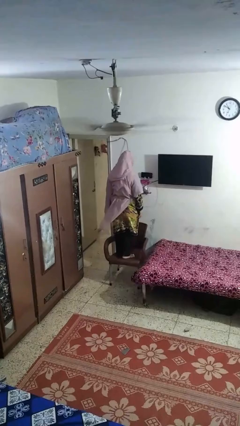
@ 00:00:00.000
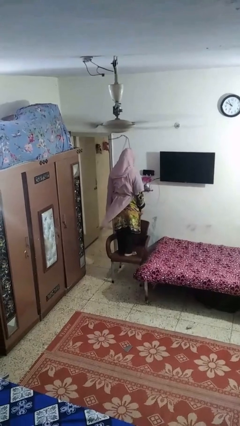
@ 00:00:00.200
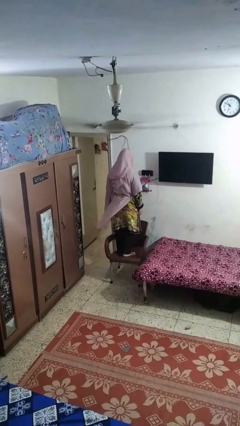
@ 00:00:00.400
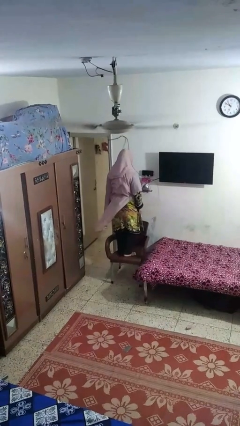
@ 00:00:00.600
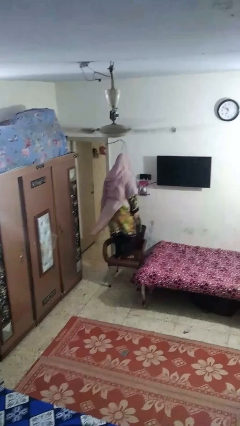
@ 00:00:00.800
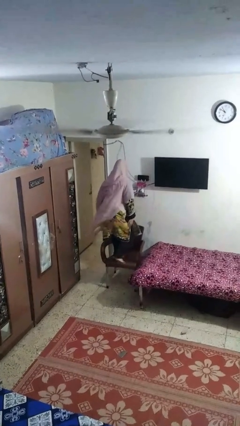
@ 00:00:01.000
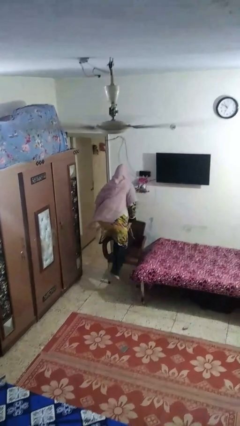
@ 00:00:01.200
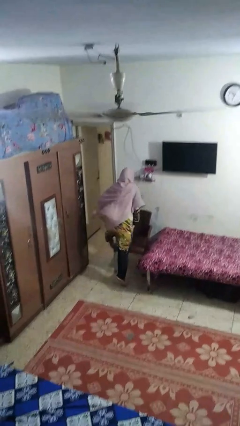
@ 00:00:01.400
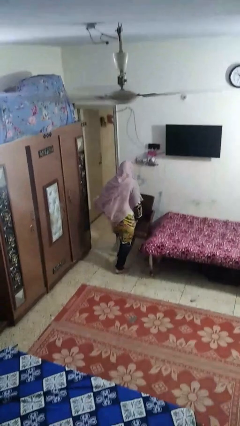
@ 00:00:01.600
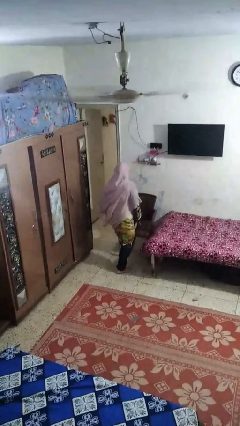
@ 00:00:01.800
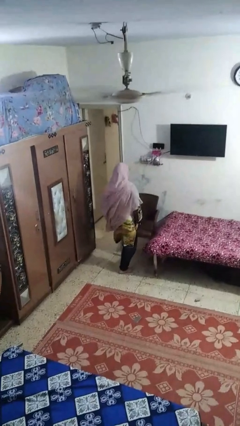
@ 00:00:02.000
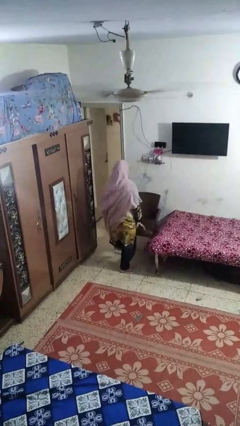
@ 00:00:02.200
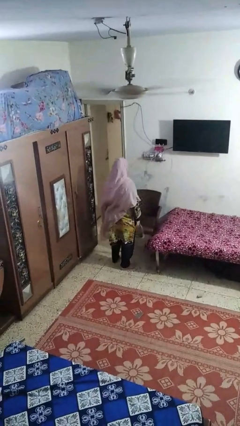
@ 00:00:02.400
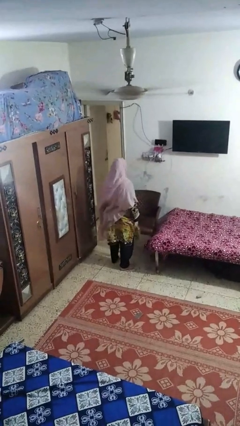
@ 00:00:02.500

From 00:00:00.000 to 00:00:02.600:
person climbs off chair

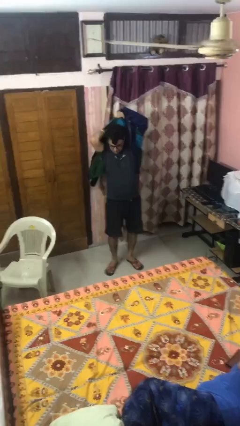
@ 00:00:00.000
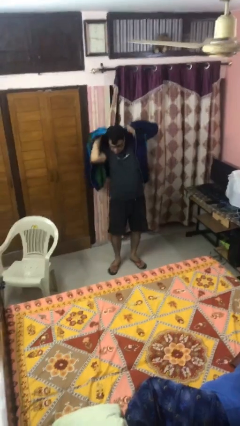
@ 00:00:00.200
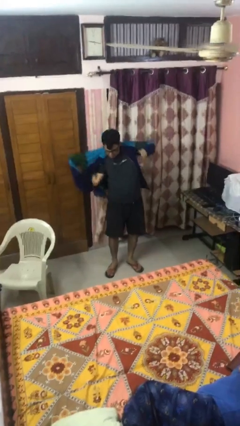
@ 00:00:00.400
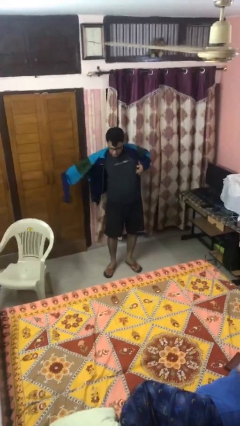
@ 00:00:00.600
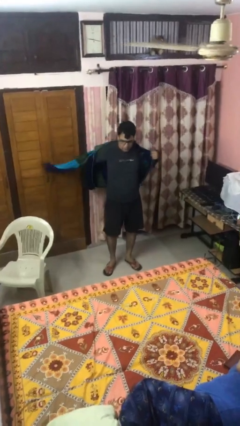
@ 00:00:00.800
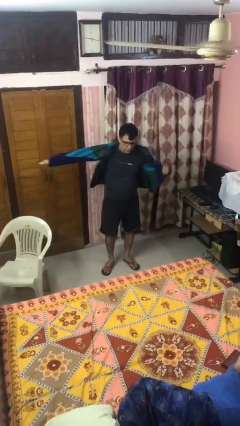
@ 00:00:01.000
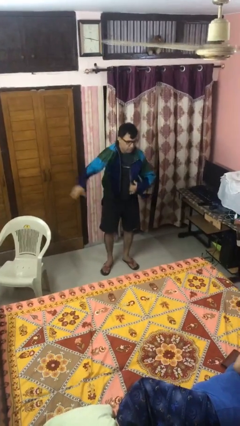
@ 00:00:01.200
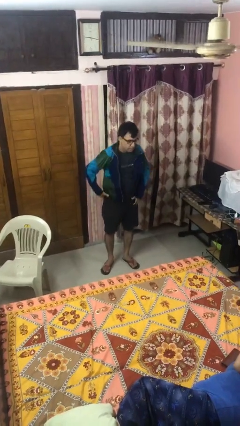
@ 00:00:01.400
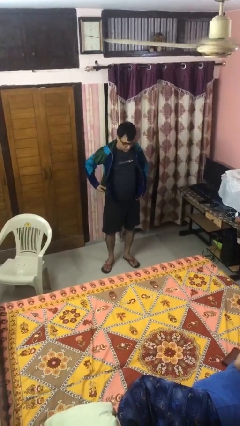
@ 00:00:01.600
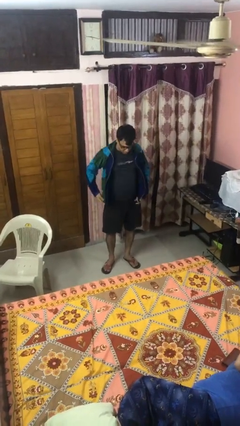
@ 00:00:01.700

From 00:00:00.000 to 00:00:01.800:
person puts on jacket

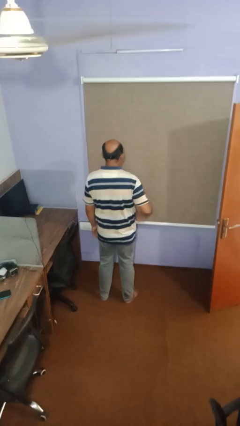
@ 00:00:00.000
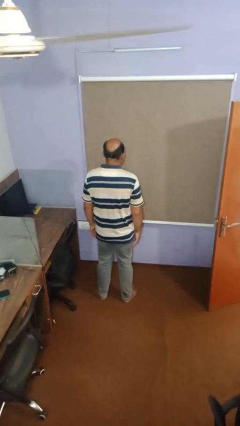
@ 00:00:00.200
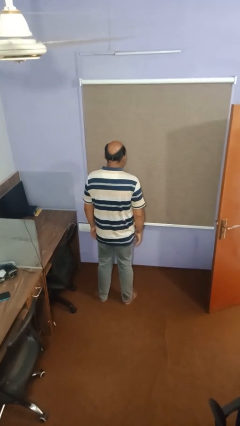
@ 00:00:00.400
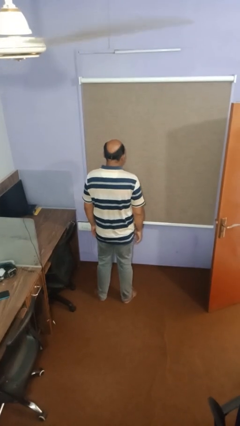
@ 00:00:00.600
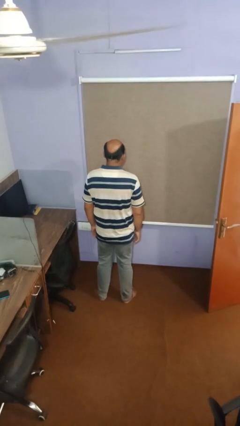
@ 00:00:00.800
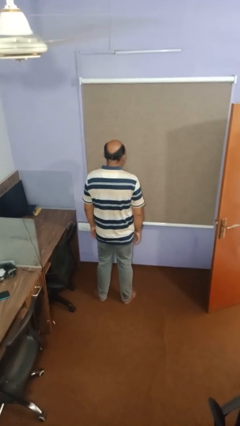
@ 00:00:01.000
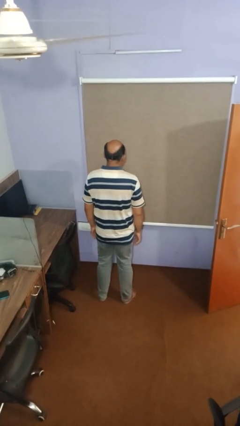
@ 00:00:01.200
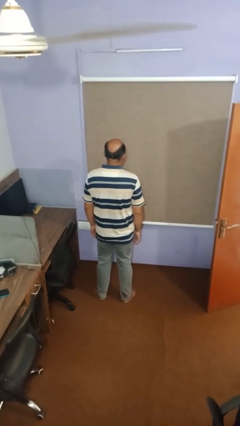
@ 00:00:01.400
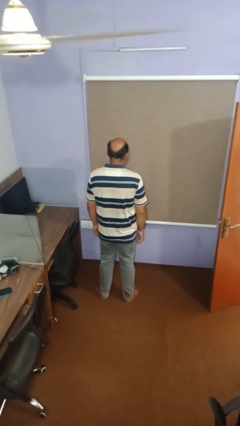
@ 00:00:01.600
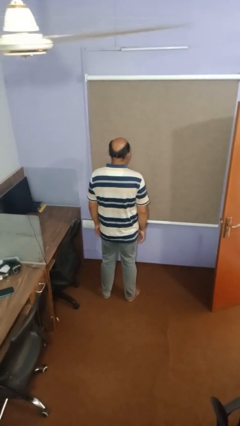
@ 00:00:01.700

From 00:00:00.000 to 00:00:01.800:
person gestures lower hand

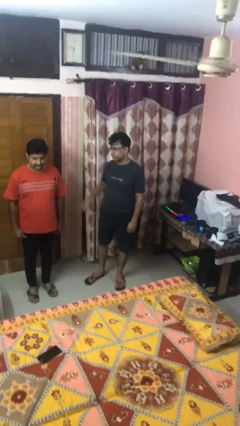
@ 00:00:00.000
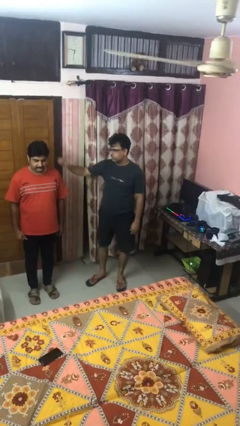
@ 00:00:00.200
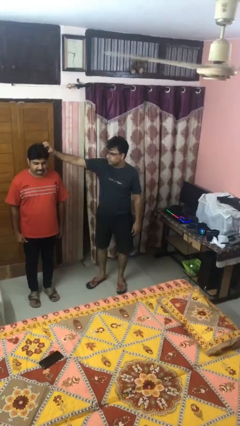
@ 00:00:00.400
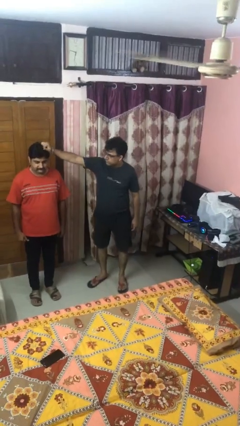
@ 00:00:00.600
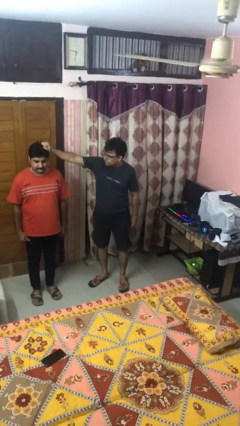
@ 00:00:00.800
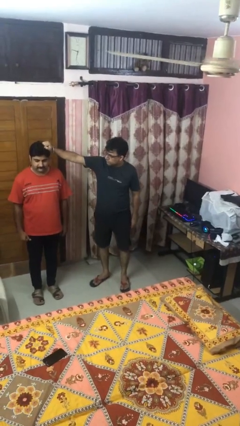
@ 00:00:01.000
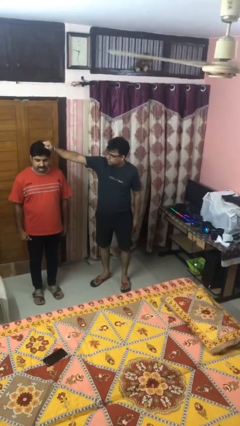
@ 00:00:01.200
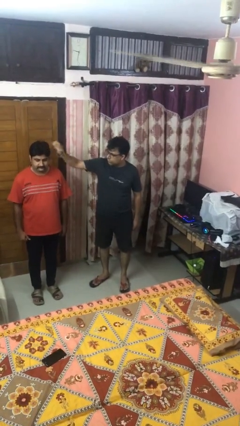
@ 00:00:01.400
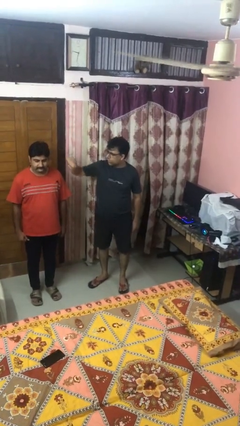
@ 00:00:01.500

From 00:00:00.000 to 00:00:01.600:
person grabs person by hair

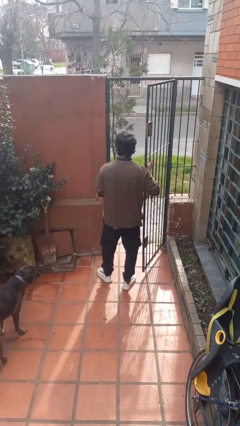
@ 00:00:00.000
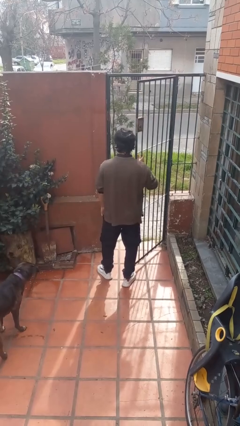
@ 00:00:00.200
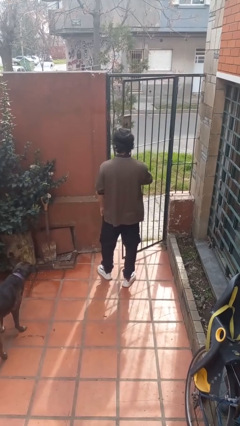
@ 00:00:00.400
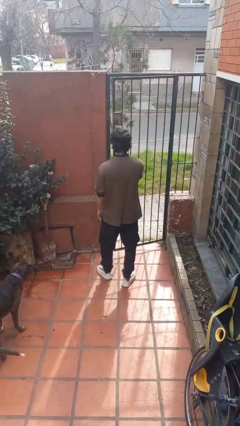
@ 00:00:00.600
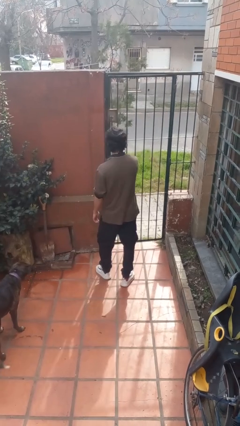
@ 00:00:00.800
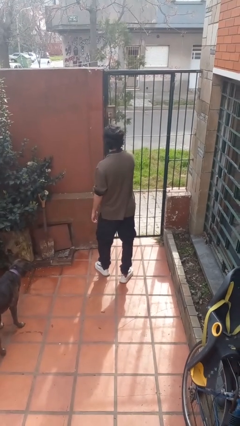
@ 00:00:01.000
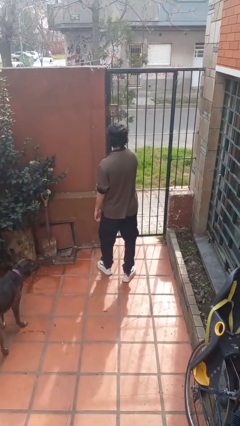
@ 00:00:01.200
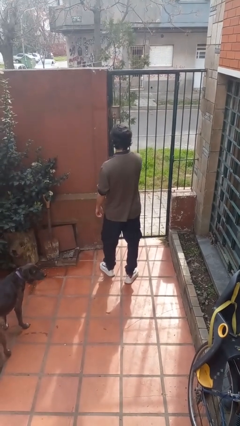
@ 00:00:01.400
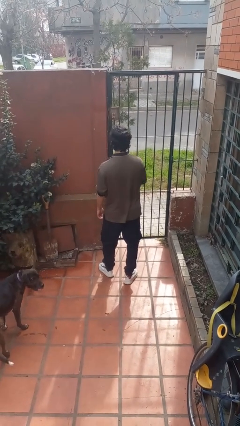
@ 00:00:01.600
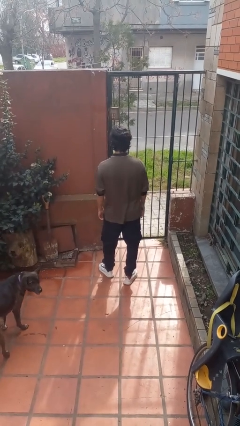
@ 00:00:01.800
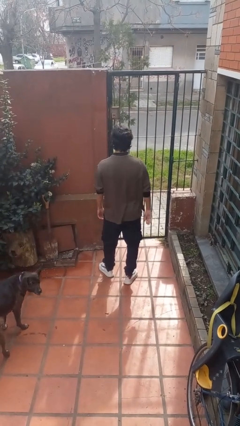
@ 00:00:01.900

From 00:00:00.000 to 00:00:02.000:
person closes gate

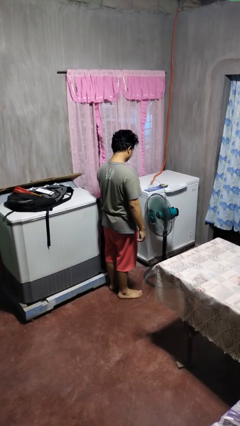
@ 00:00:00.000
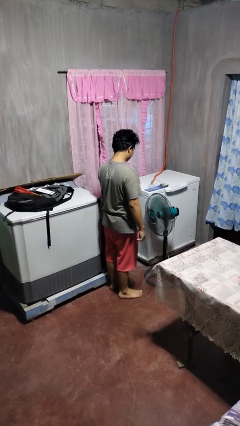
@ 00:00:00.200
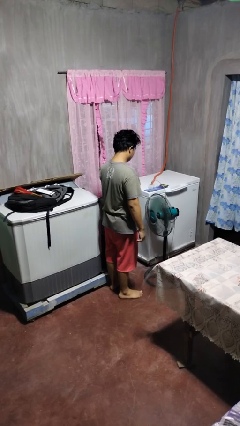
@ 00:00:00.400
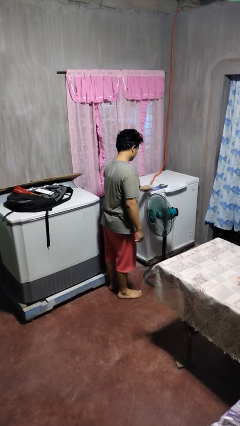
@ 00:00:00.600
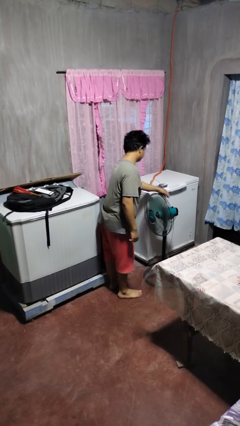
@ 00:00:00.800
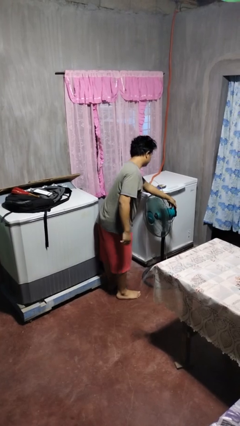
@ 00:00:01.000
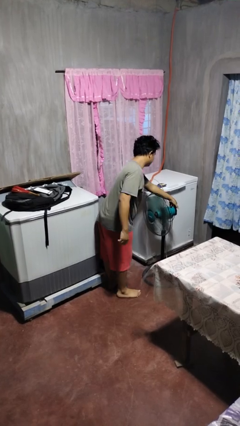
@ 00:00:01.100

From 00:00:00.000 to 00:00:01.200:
person turns on fan

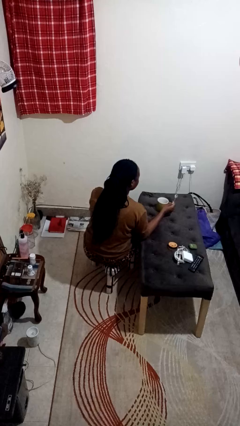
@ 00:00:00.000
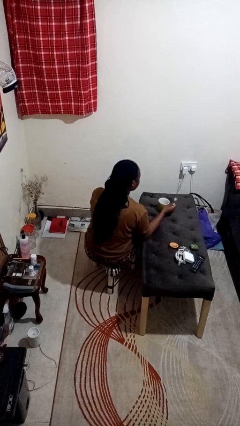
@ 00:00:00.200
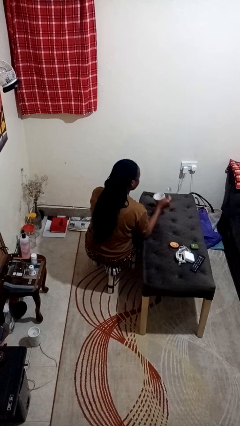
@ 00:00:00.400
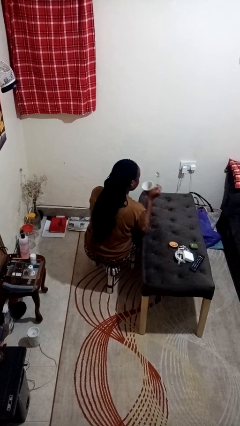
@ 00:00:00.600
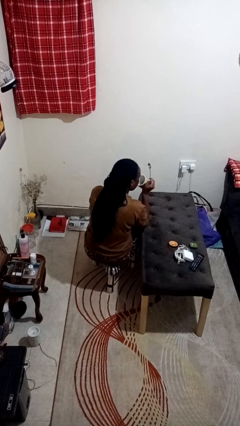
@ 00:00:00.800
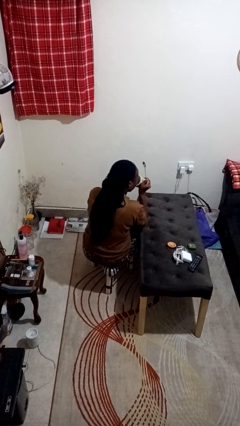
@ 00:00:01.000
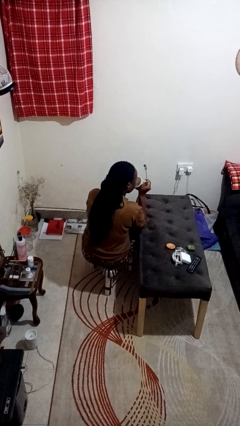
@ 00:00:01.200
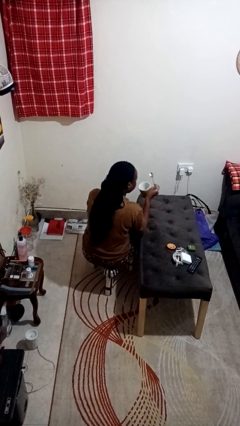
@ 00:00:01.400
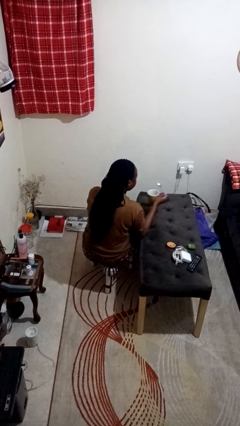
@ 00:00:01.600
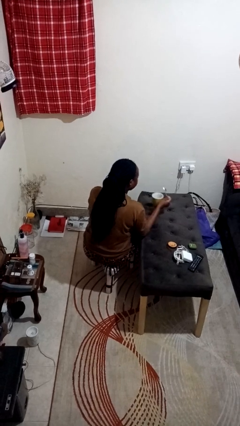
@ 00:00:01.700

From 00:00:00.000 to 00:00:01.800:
person drinks from mug

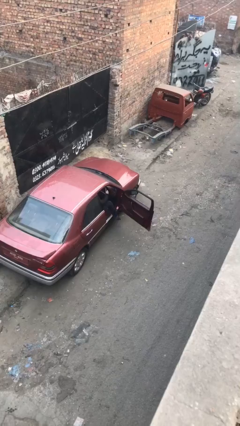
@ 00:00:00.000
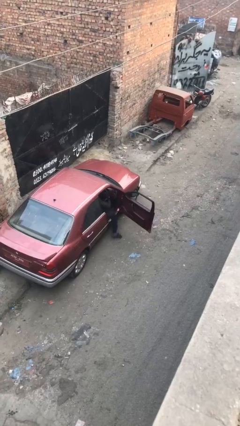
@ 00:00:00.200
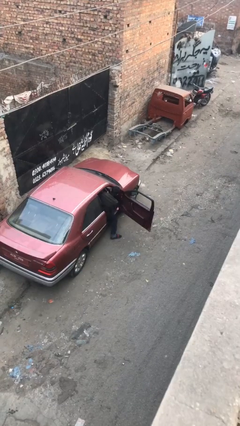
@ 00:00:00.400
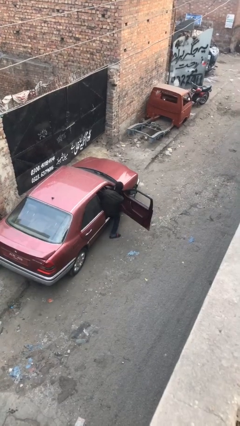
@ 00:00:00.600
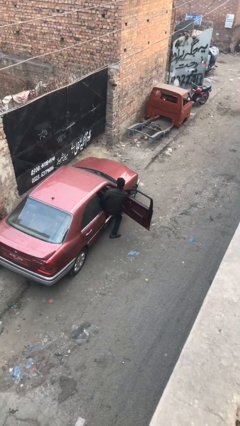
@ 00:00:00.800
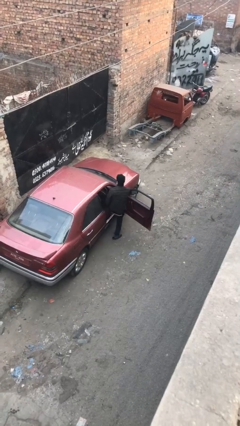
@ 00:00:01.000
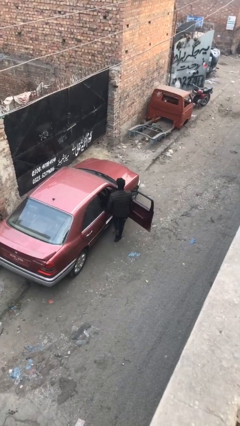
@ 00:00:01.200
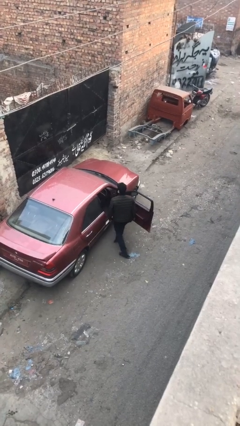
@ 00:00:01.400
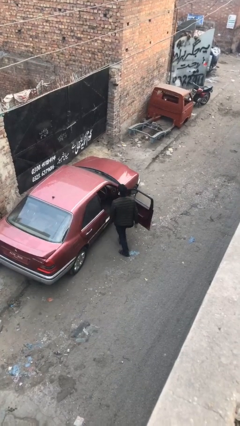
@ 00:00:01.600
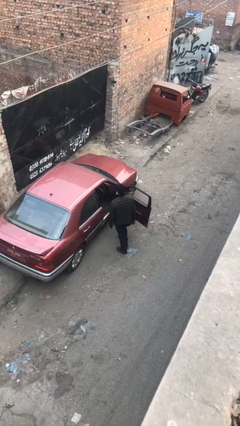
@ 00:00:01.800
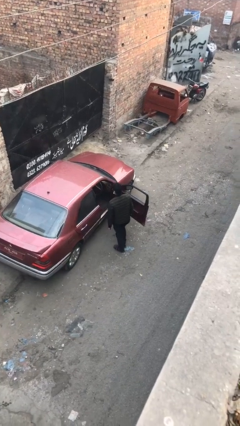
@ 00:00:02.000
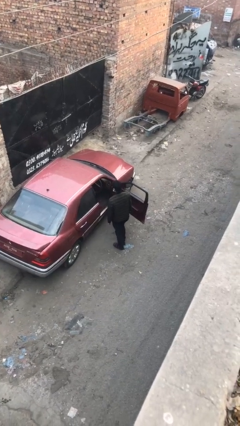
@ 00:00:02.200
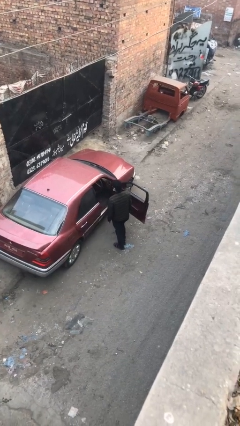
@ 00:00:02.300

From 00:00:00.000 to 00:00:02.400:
person exits car

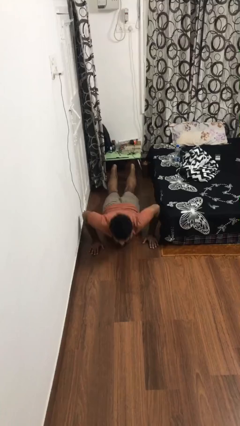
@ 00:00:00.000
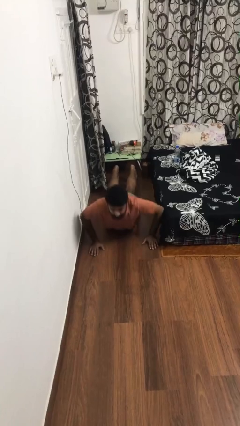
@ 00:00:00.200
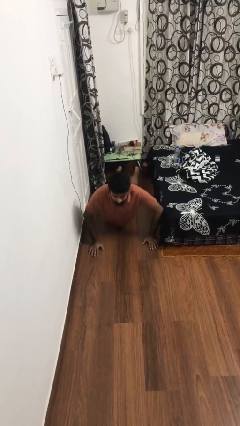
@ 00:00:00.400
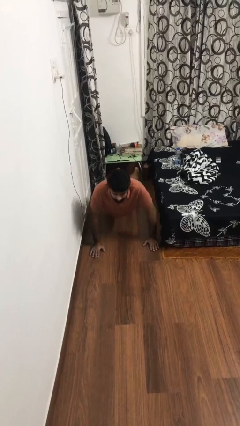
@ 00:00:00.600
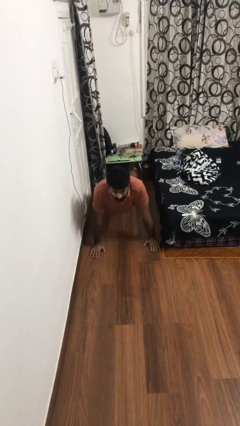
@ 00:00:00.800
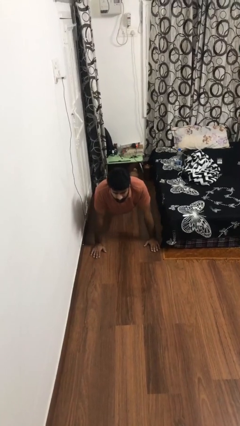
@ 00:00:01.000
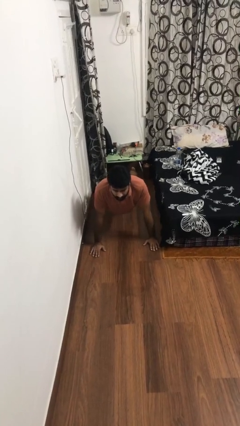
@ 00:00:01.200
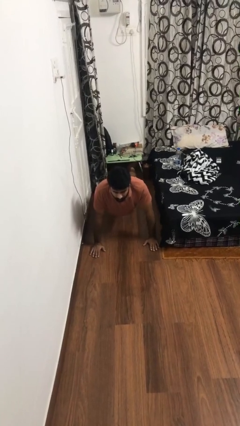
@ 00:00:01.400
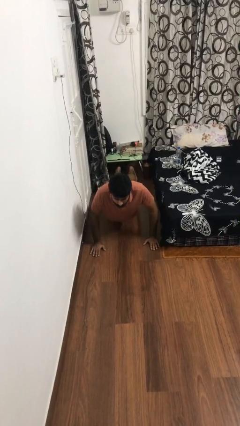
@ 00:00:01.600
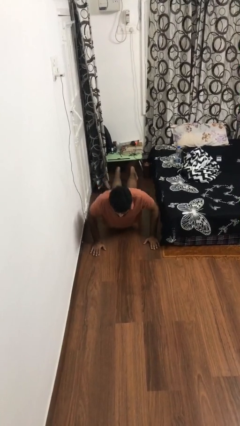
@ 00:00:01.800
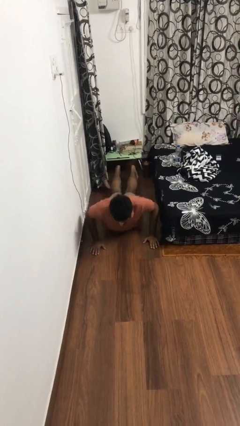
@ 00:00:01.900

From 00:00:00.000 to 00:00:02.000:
person exercises with pushup
